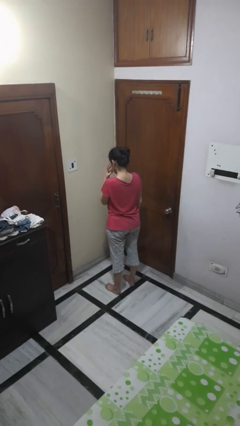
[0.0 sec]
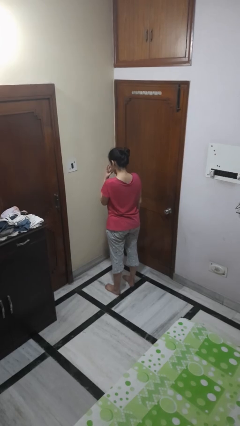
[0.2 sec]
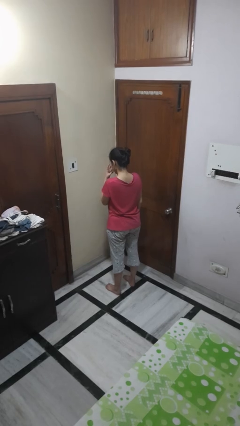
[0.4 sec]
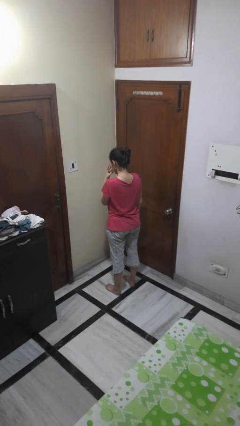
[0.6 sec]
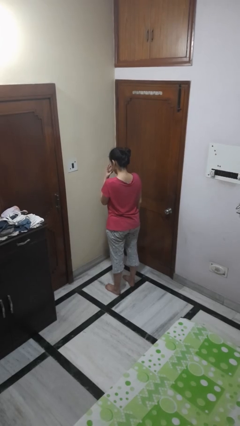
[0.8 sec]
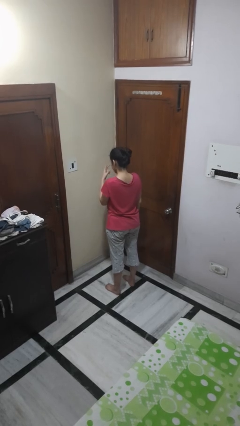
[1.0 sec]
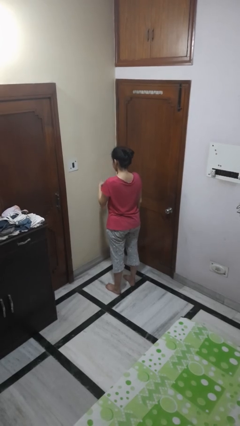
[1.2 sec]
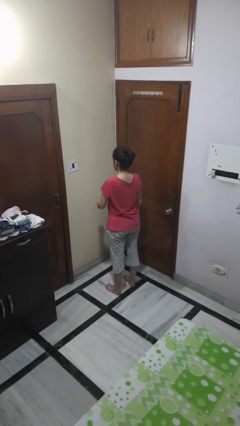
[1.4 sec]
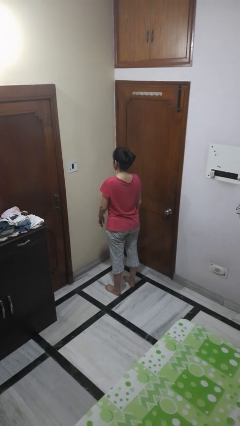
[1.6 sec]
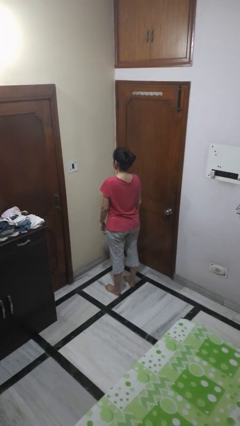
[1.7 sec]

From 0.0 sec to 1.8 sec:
person gestures watch closely

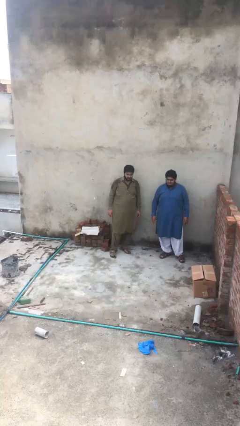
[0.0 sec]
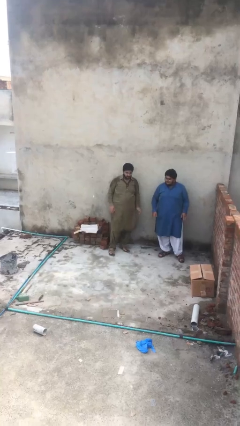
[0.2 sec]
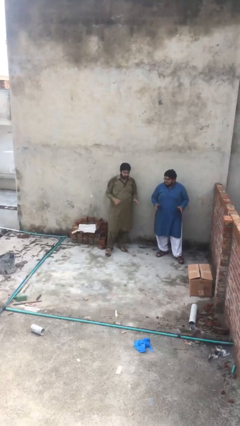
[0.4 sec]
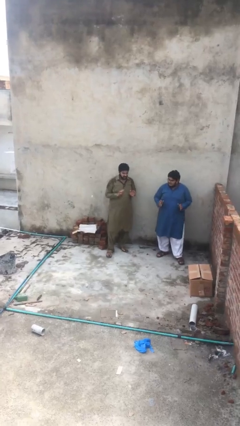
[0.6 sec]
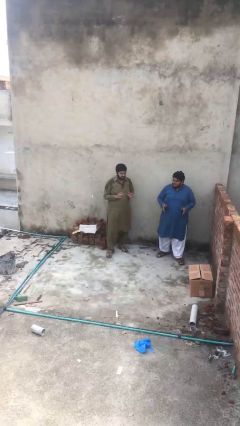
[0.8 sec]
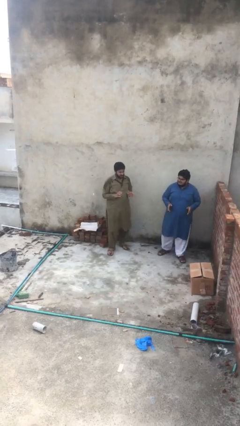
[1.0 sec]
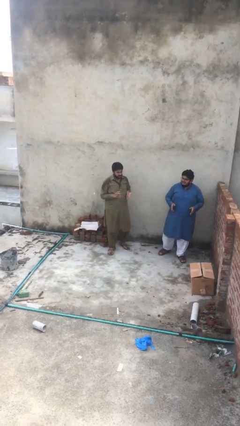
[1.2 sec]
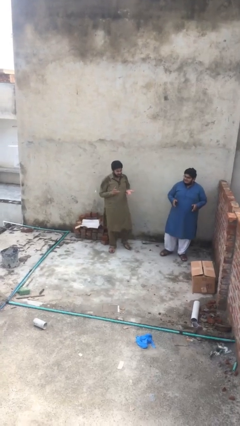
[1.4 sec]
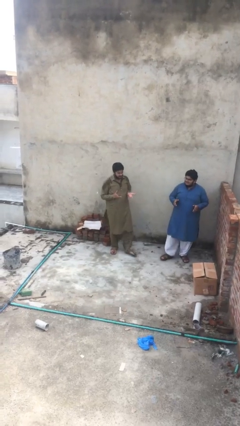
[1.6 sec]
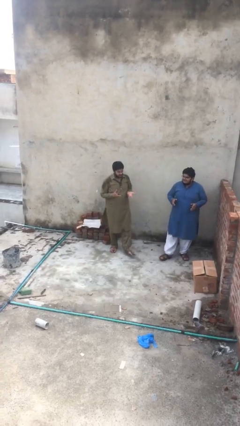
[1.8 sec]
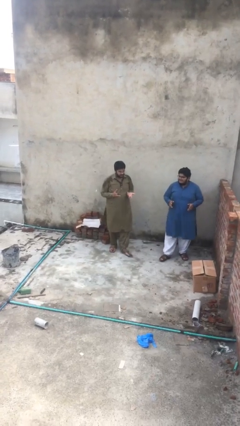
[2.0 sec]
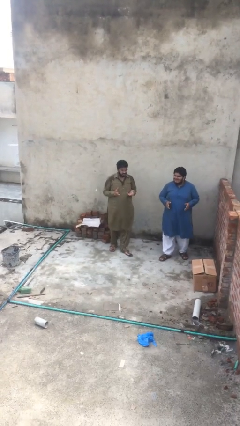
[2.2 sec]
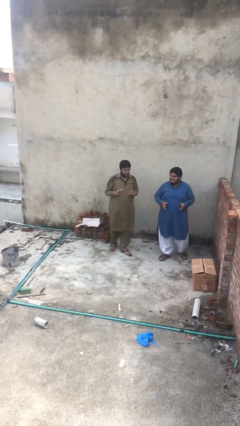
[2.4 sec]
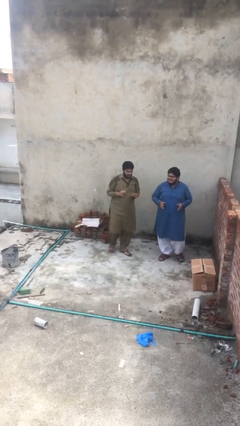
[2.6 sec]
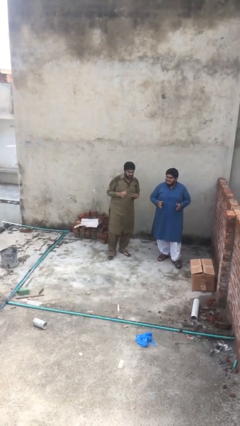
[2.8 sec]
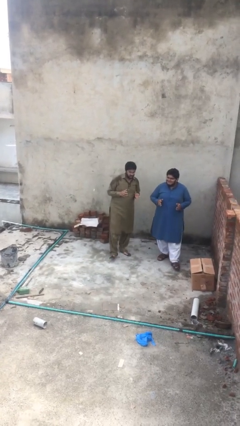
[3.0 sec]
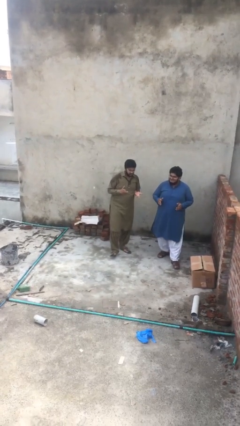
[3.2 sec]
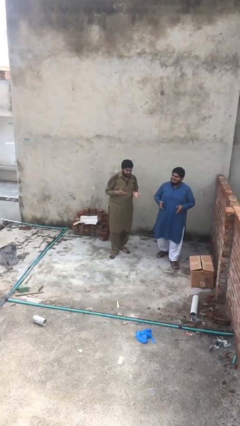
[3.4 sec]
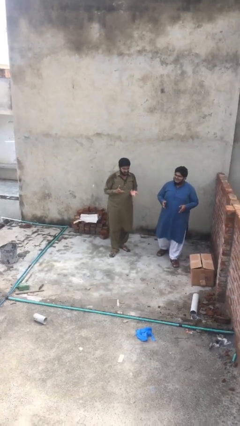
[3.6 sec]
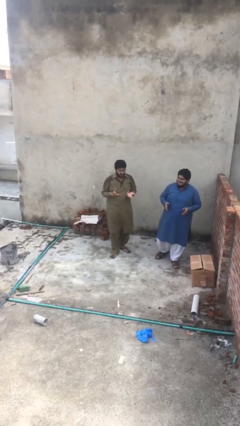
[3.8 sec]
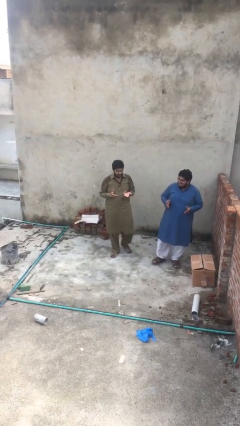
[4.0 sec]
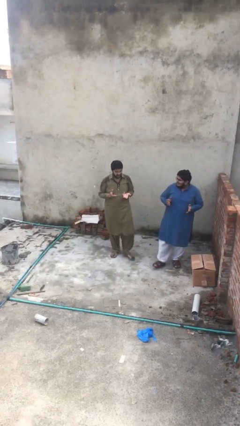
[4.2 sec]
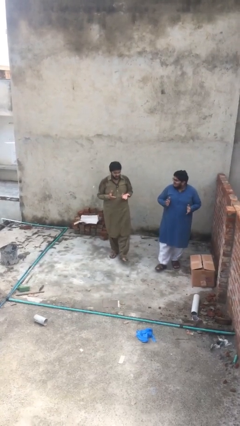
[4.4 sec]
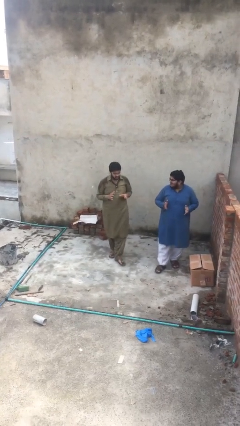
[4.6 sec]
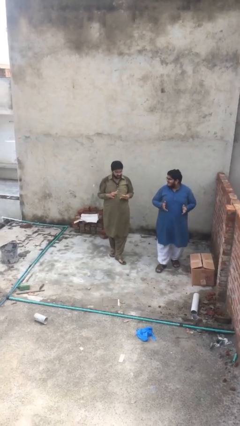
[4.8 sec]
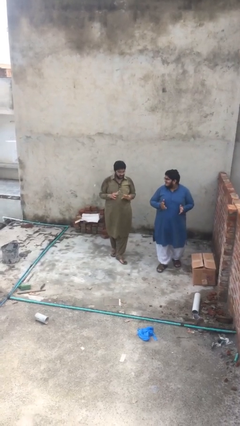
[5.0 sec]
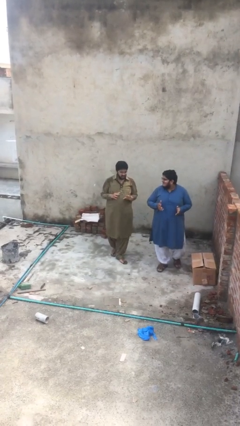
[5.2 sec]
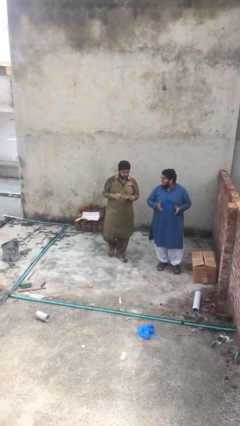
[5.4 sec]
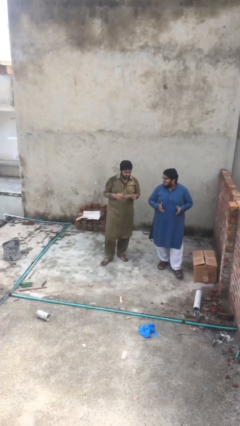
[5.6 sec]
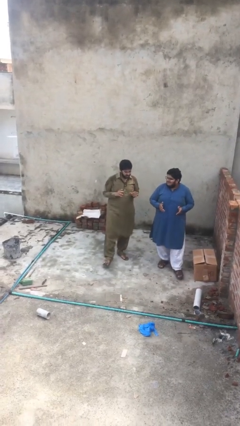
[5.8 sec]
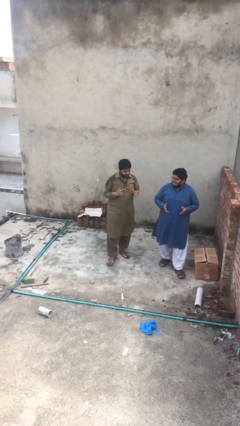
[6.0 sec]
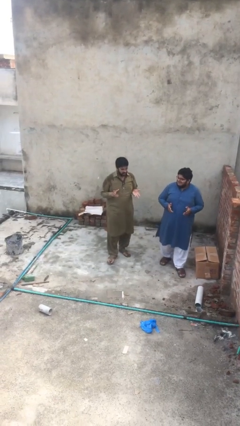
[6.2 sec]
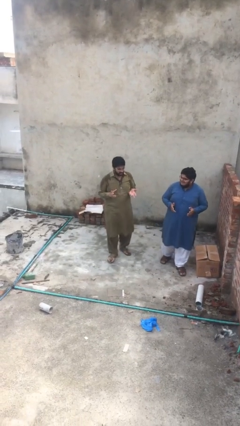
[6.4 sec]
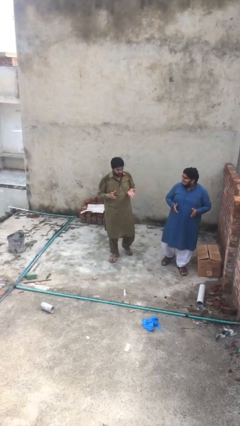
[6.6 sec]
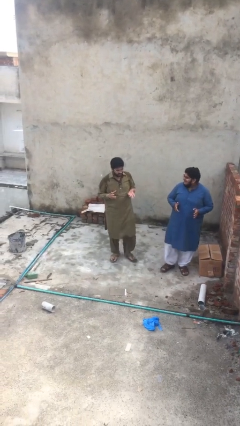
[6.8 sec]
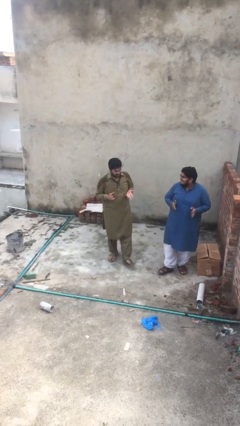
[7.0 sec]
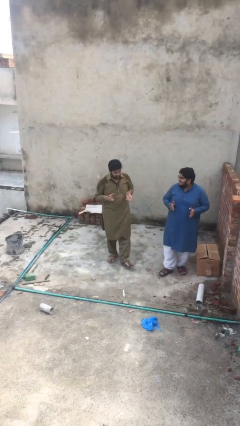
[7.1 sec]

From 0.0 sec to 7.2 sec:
person talks to person

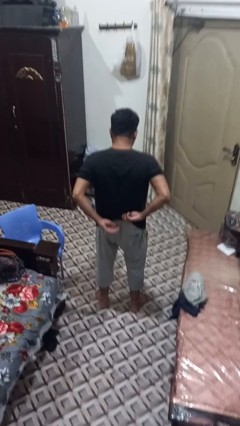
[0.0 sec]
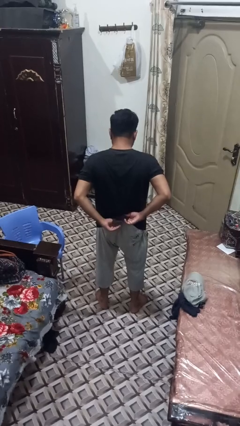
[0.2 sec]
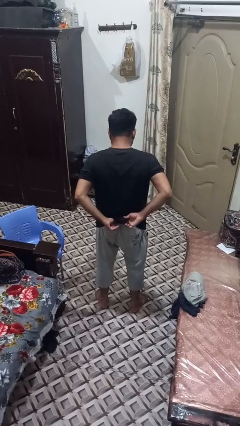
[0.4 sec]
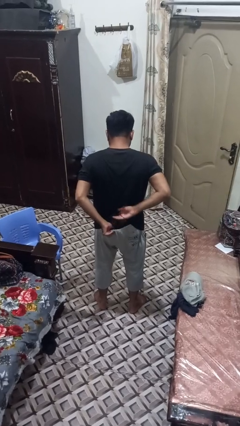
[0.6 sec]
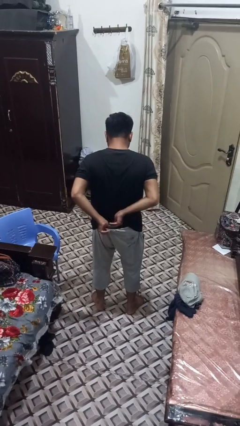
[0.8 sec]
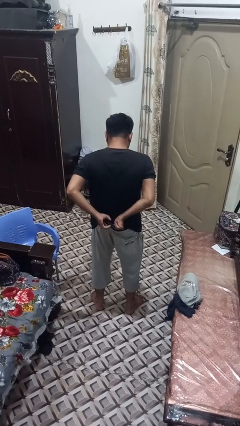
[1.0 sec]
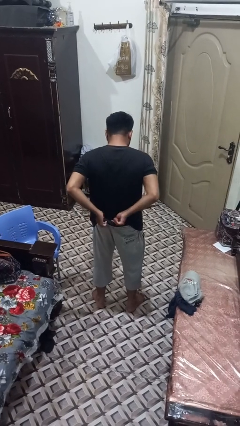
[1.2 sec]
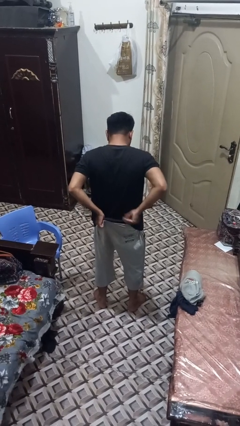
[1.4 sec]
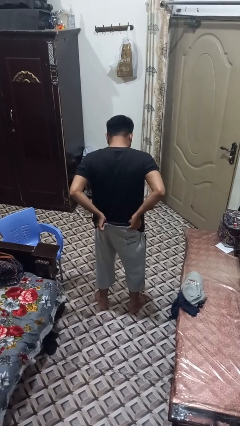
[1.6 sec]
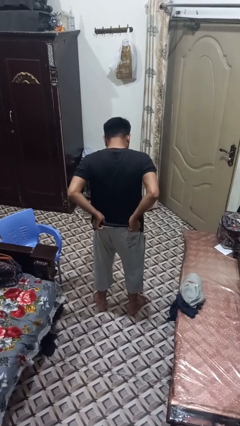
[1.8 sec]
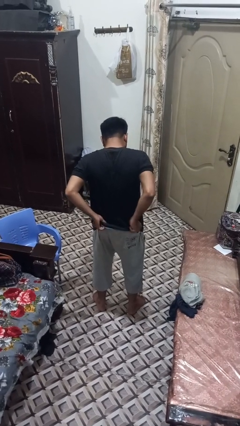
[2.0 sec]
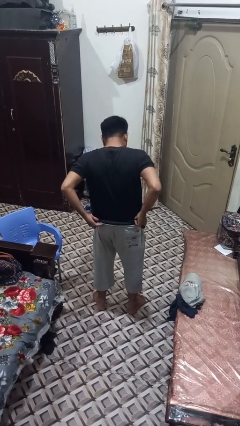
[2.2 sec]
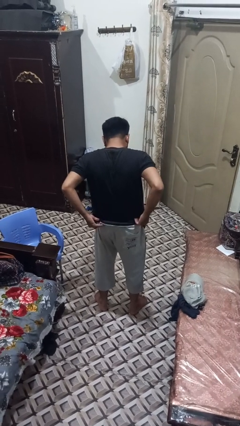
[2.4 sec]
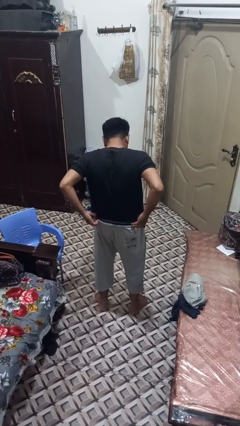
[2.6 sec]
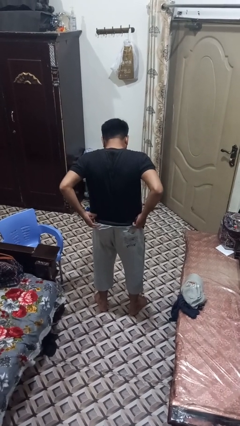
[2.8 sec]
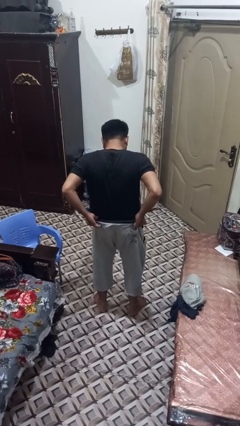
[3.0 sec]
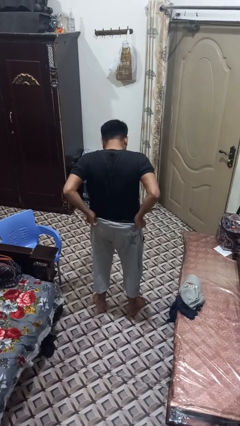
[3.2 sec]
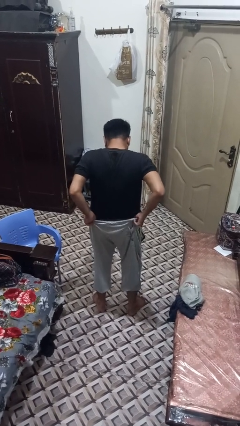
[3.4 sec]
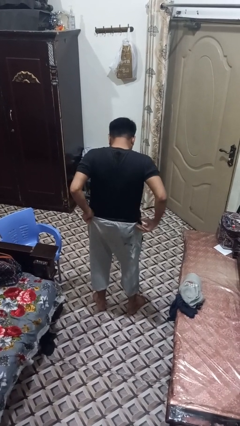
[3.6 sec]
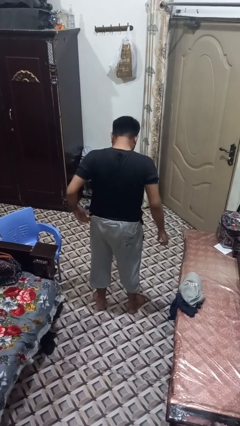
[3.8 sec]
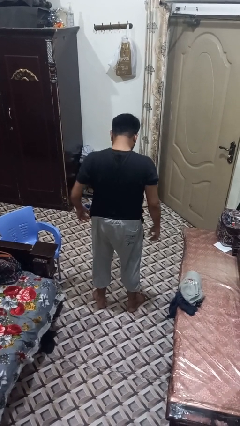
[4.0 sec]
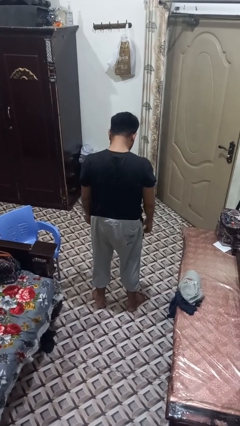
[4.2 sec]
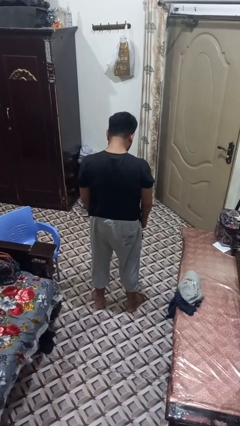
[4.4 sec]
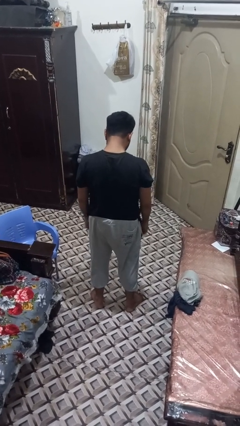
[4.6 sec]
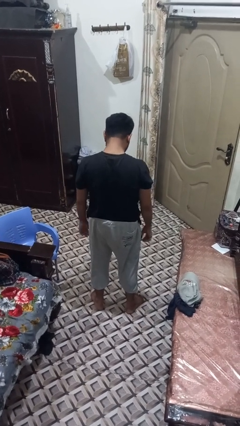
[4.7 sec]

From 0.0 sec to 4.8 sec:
person tucks in shirt

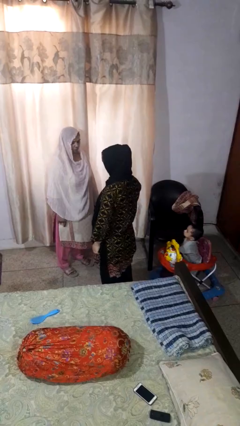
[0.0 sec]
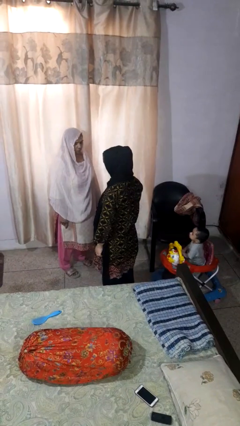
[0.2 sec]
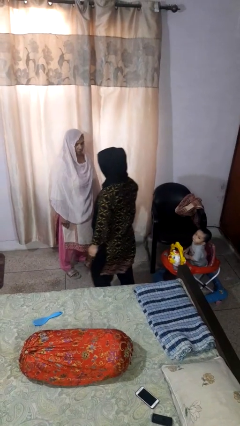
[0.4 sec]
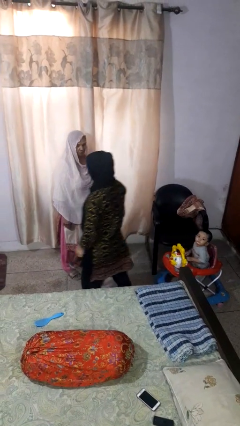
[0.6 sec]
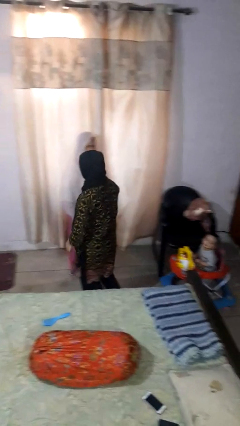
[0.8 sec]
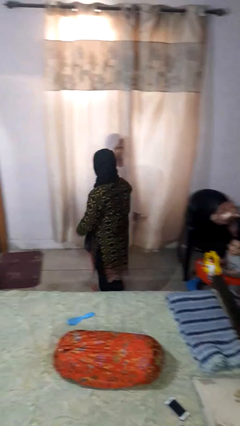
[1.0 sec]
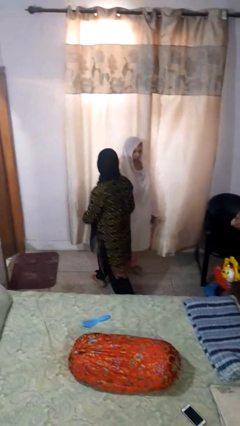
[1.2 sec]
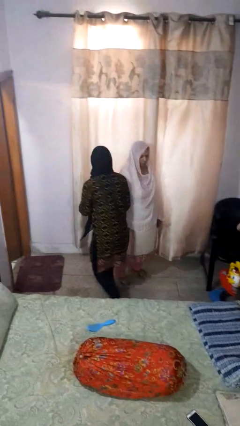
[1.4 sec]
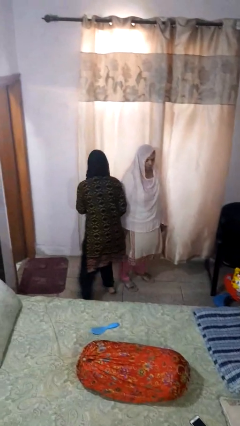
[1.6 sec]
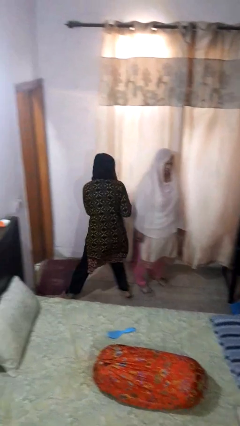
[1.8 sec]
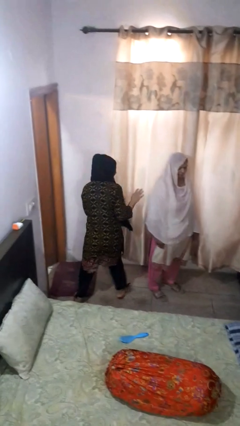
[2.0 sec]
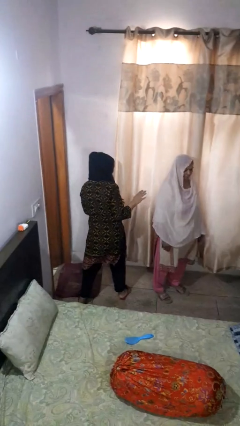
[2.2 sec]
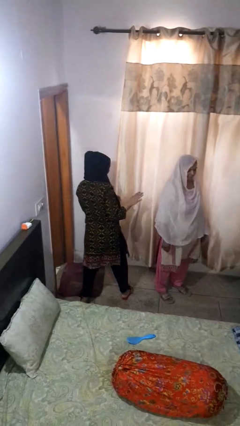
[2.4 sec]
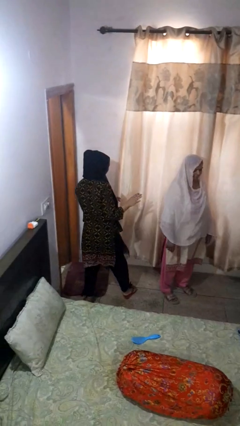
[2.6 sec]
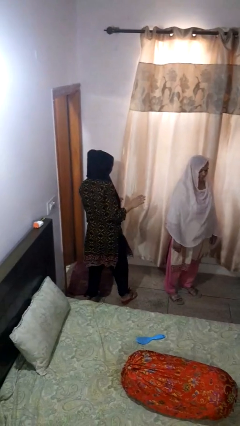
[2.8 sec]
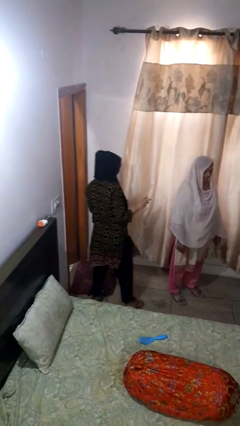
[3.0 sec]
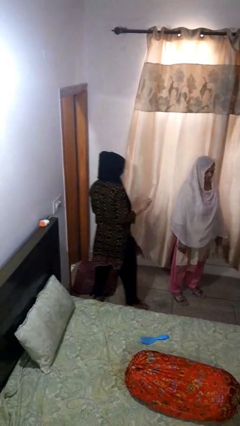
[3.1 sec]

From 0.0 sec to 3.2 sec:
person bumps into person

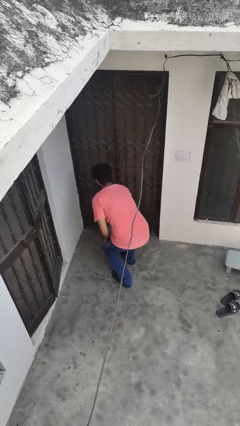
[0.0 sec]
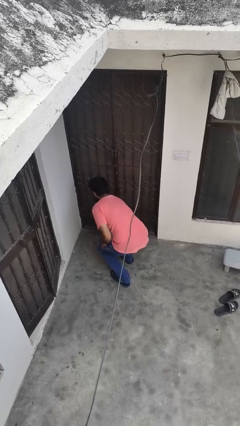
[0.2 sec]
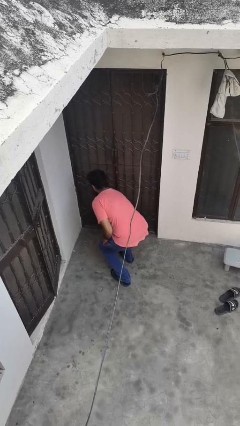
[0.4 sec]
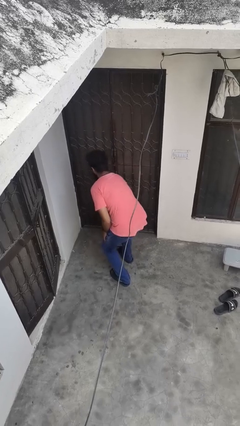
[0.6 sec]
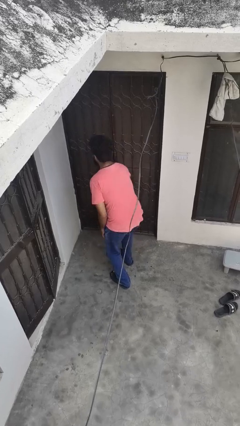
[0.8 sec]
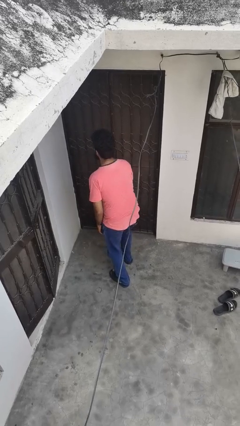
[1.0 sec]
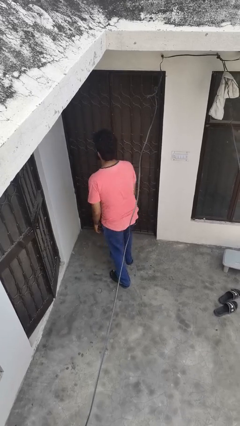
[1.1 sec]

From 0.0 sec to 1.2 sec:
person picks up object from floor
